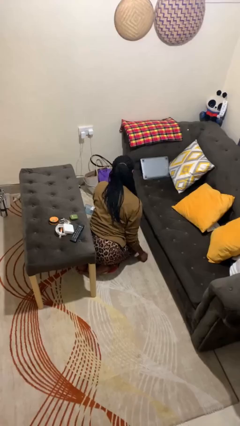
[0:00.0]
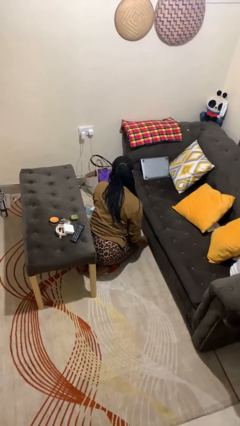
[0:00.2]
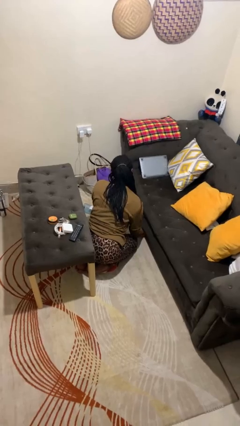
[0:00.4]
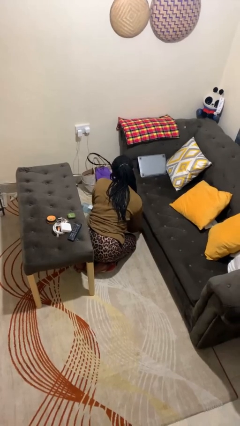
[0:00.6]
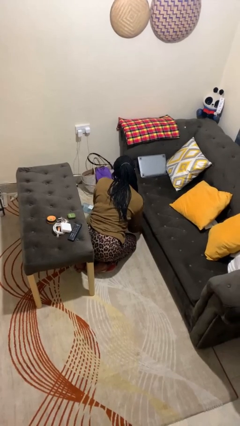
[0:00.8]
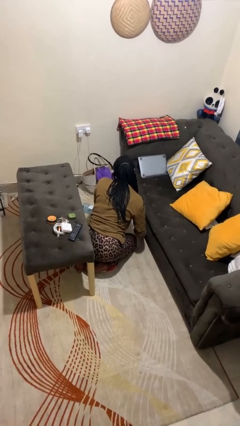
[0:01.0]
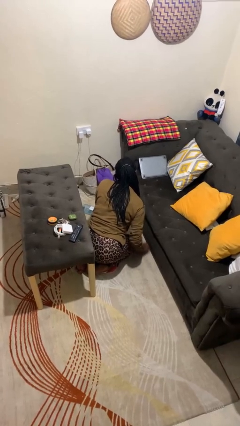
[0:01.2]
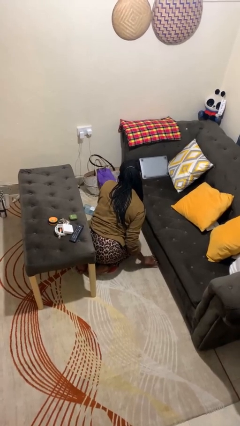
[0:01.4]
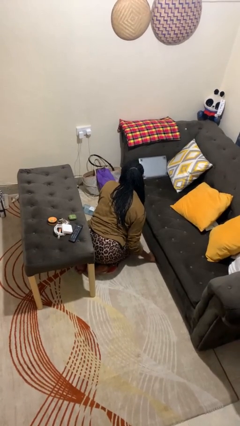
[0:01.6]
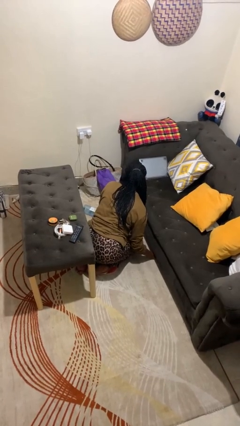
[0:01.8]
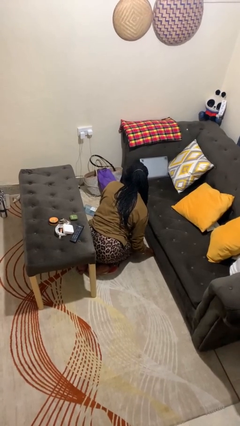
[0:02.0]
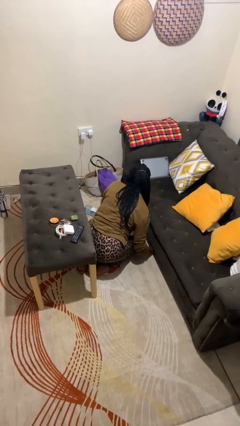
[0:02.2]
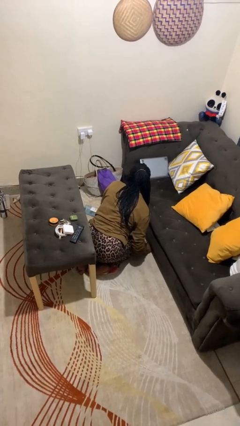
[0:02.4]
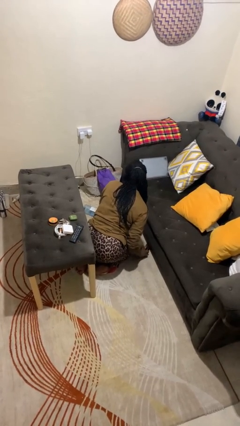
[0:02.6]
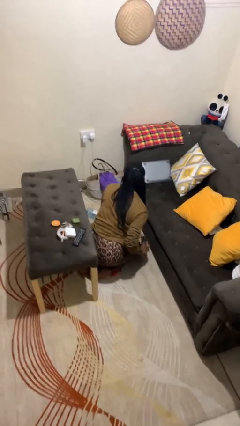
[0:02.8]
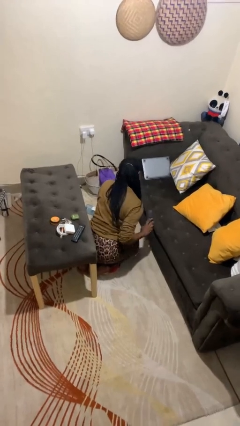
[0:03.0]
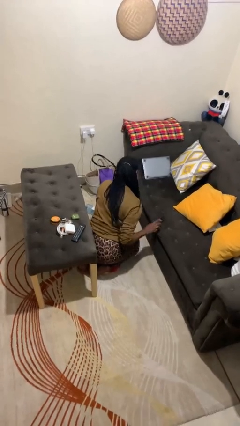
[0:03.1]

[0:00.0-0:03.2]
person searches under couch

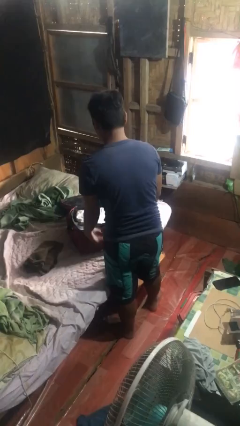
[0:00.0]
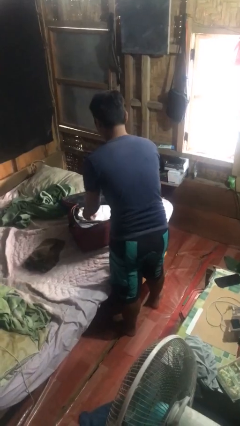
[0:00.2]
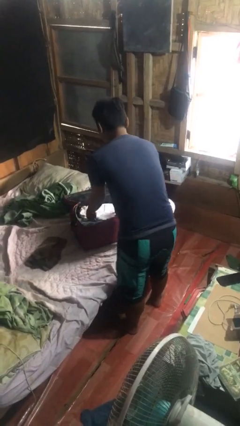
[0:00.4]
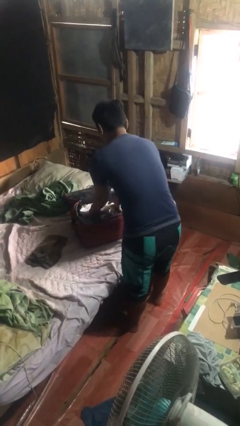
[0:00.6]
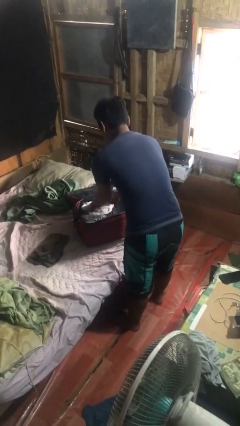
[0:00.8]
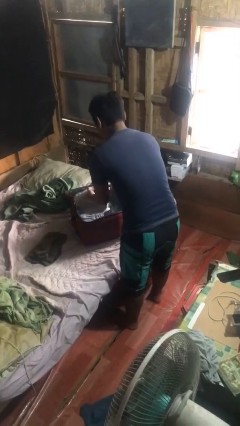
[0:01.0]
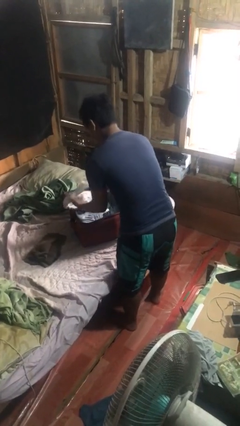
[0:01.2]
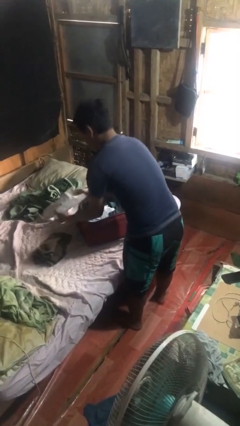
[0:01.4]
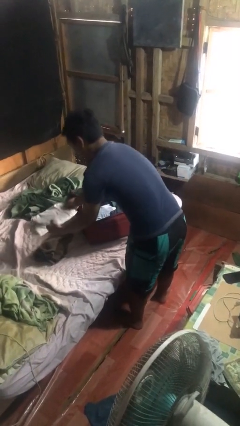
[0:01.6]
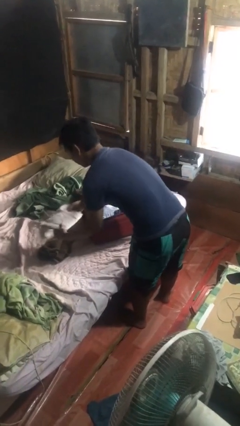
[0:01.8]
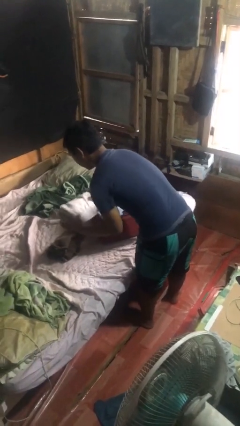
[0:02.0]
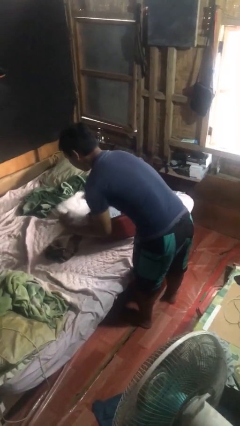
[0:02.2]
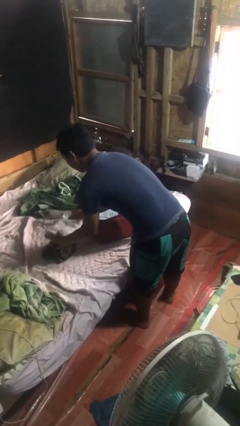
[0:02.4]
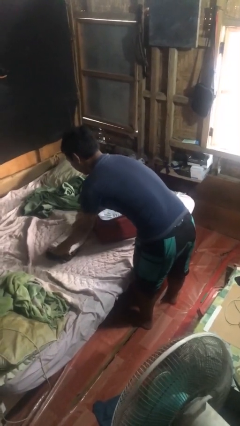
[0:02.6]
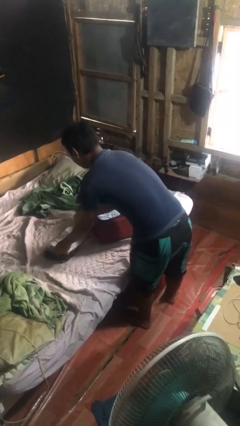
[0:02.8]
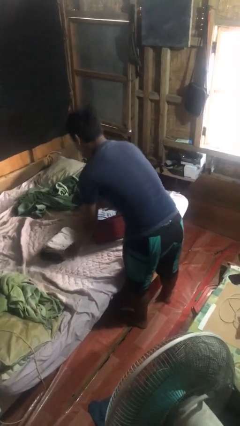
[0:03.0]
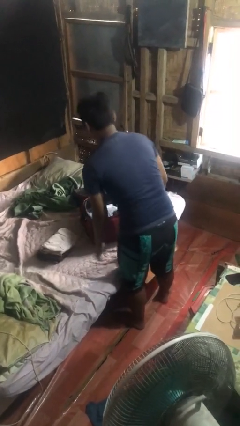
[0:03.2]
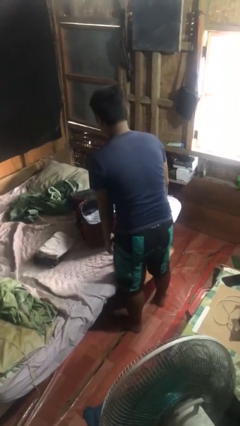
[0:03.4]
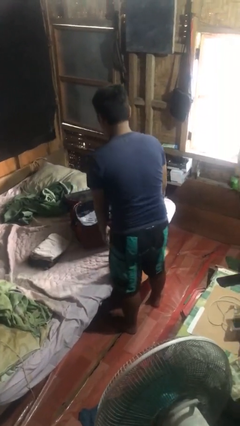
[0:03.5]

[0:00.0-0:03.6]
person unloads clothes from suitcase

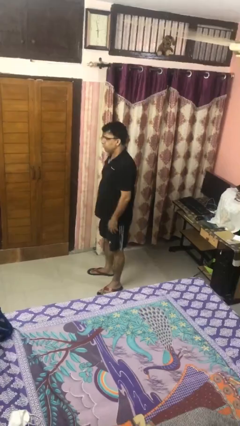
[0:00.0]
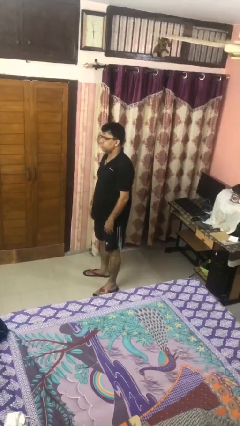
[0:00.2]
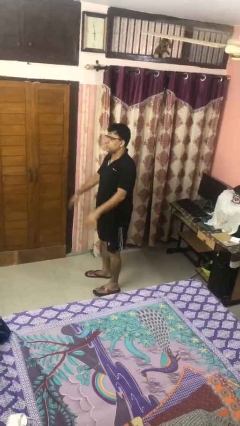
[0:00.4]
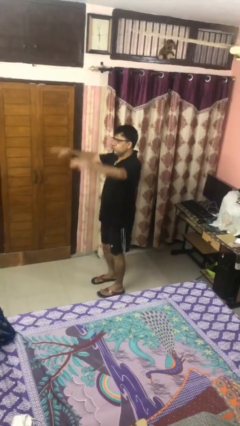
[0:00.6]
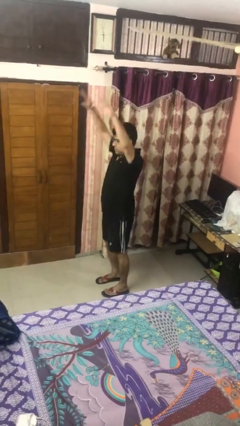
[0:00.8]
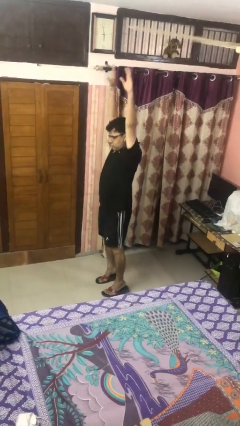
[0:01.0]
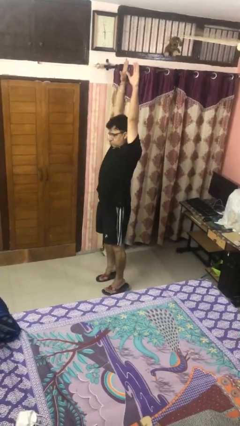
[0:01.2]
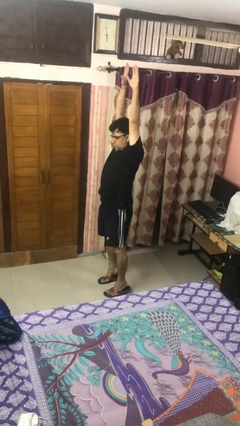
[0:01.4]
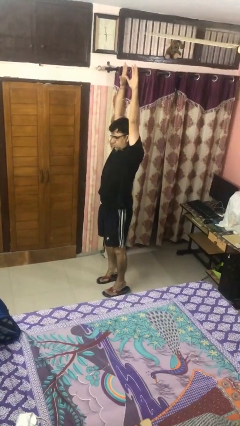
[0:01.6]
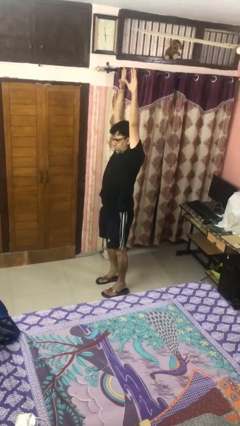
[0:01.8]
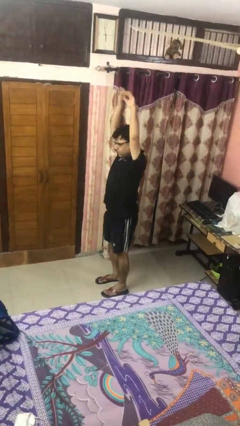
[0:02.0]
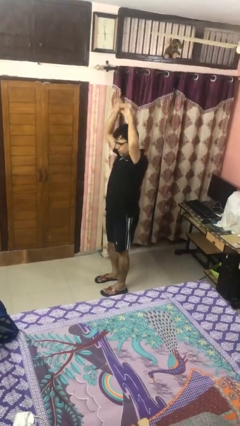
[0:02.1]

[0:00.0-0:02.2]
person stretches arms over head

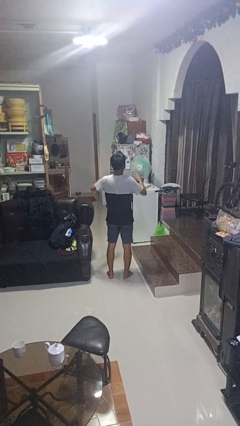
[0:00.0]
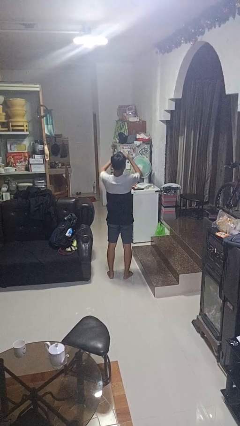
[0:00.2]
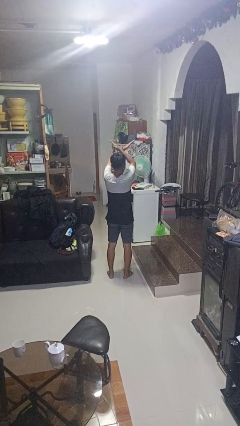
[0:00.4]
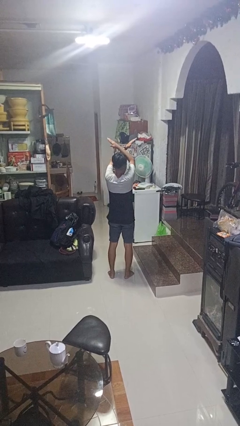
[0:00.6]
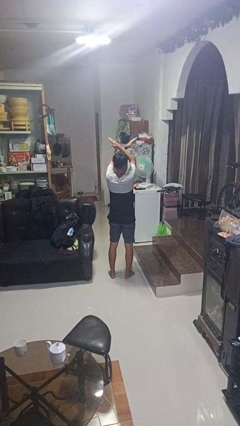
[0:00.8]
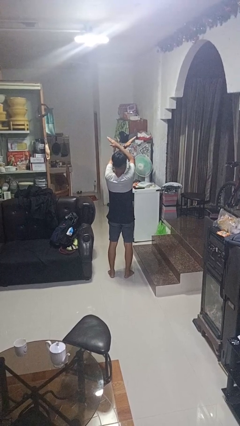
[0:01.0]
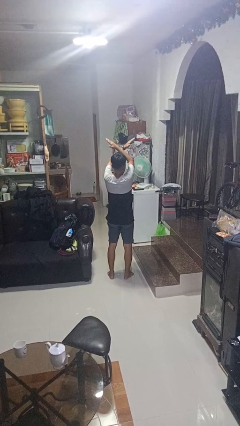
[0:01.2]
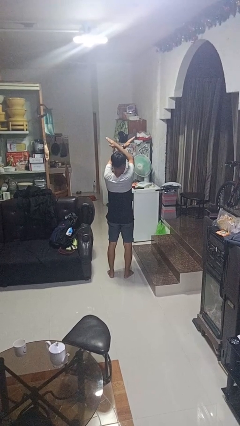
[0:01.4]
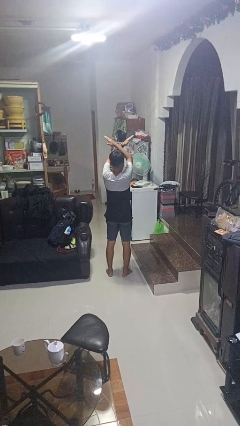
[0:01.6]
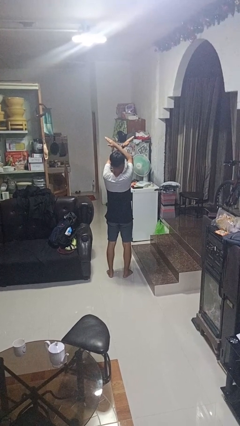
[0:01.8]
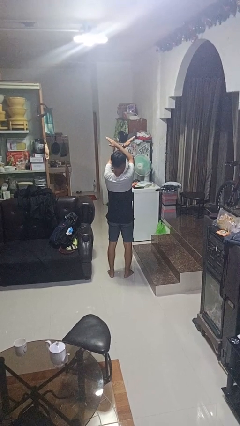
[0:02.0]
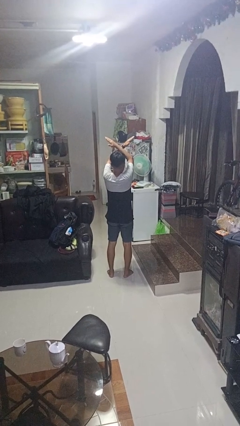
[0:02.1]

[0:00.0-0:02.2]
person gestures arms x

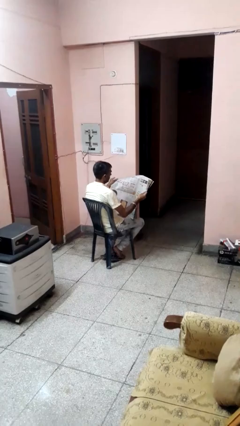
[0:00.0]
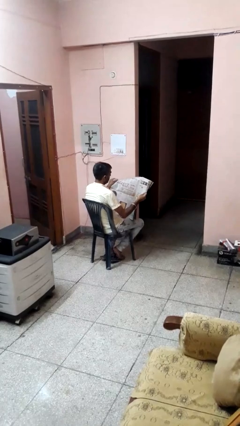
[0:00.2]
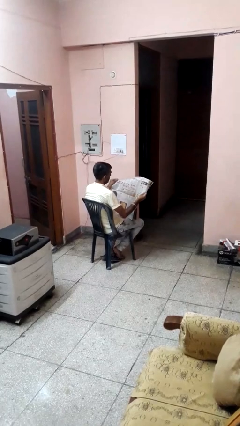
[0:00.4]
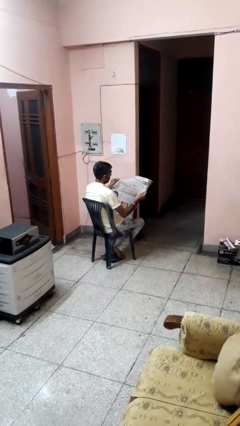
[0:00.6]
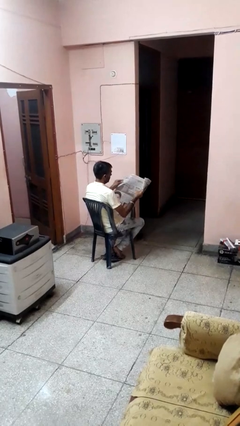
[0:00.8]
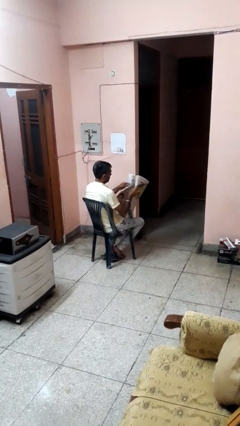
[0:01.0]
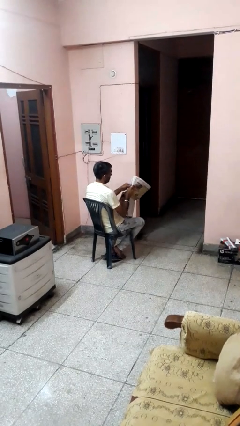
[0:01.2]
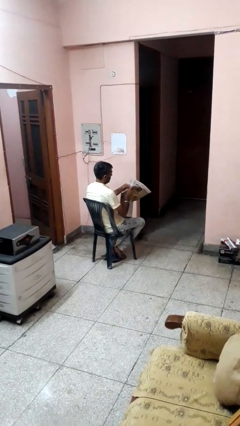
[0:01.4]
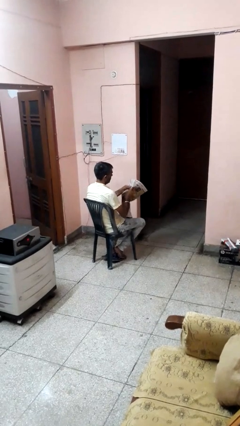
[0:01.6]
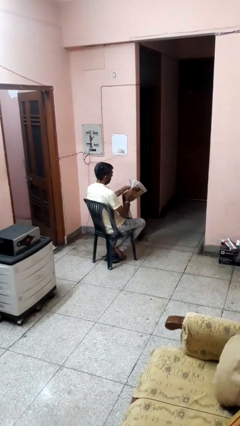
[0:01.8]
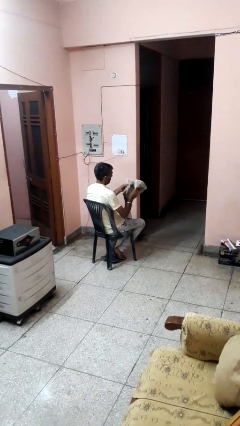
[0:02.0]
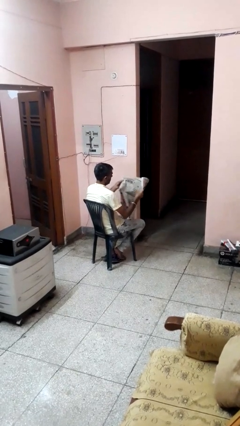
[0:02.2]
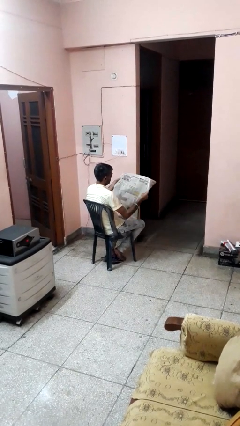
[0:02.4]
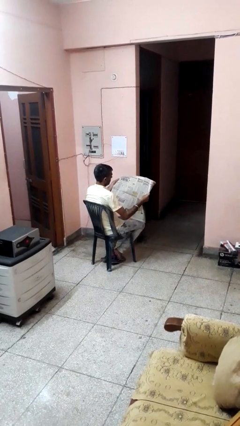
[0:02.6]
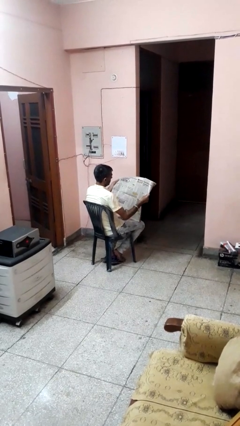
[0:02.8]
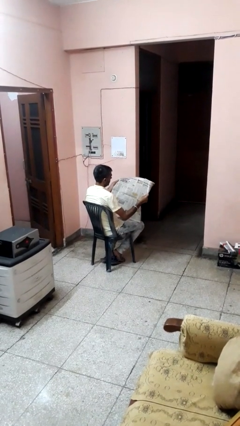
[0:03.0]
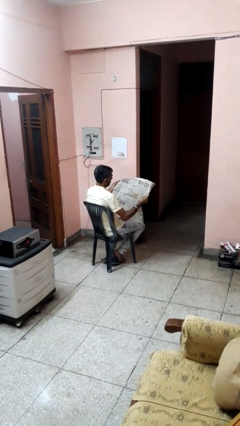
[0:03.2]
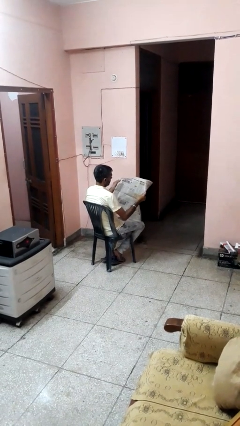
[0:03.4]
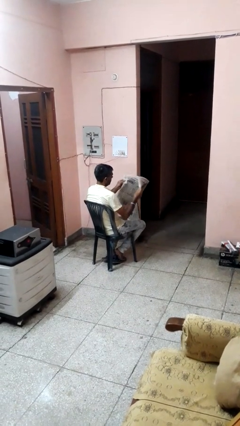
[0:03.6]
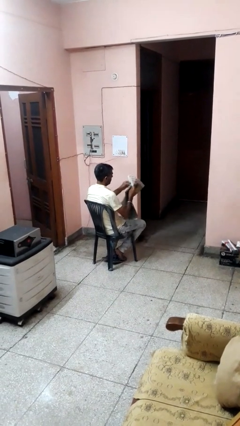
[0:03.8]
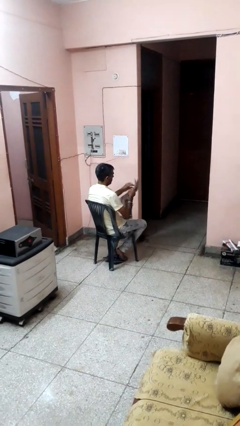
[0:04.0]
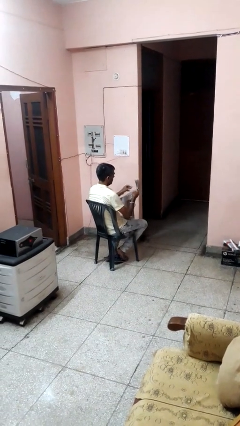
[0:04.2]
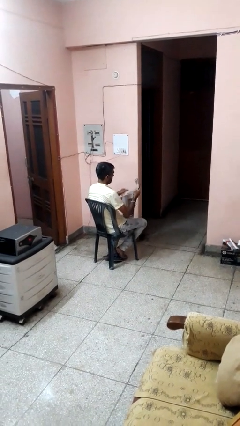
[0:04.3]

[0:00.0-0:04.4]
person reads newspaper

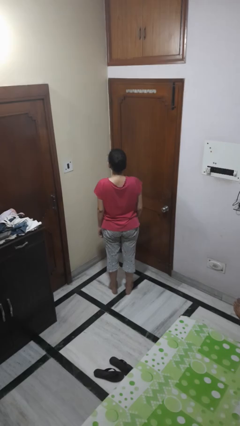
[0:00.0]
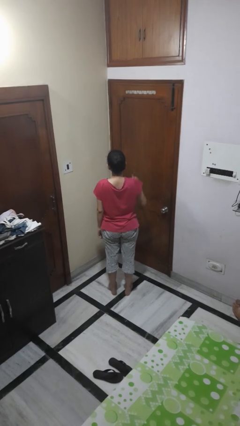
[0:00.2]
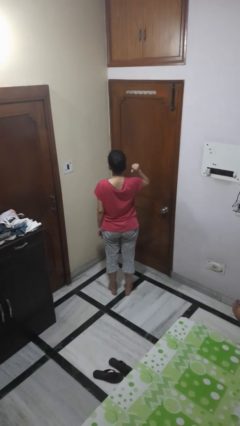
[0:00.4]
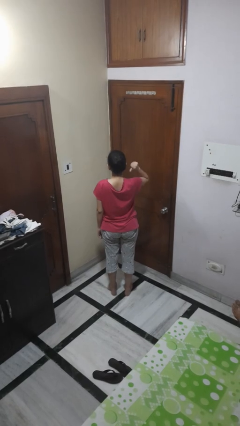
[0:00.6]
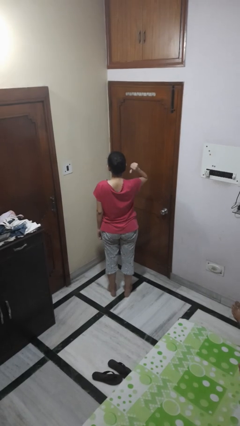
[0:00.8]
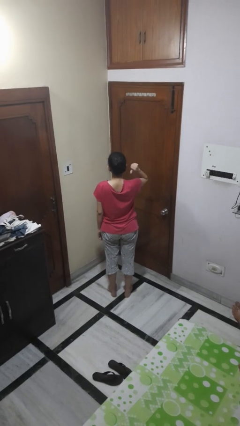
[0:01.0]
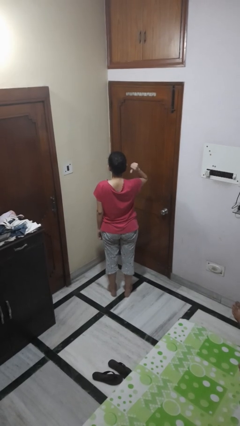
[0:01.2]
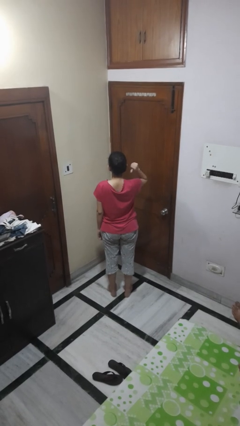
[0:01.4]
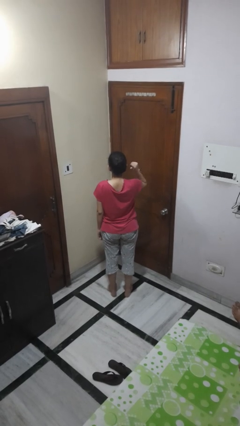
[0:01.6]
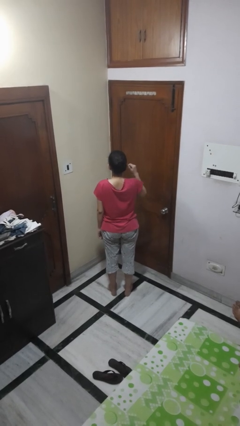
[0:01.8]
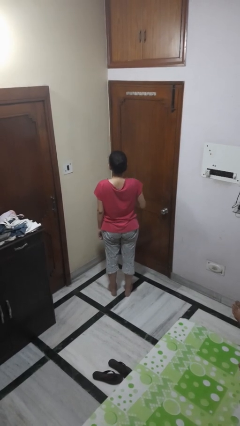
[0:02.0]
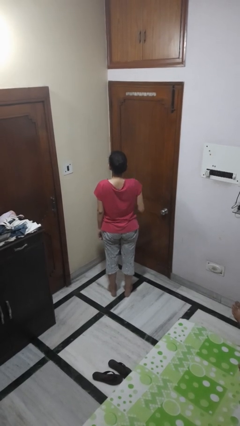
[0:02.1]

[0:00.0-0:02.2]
person gestures behind me
